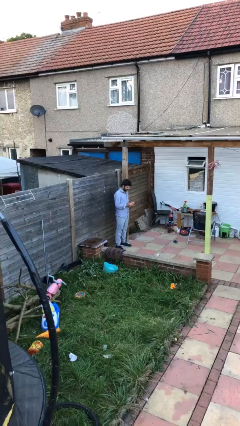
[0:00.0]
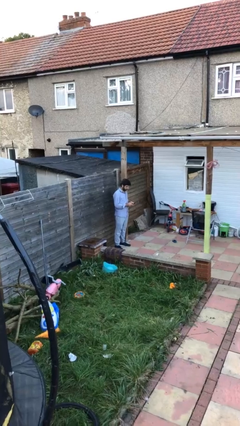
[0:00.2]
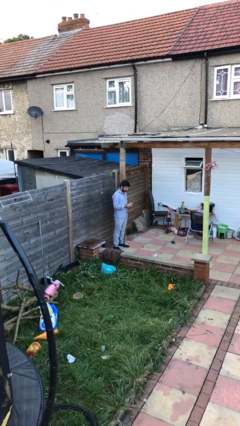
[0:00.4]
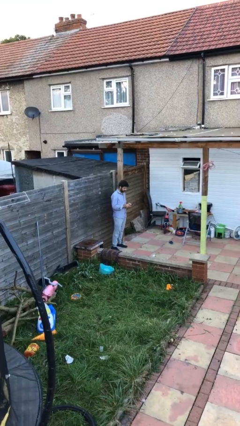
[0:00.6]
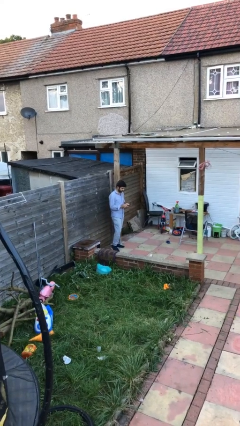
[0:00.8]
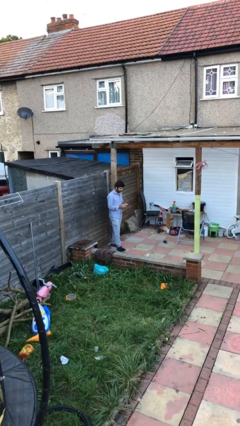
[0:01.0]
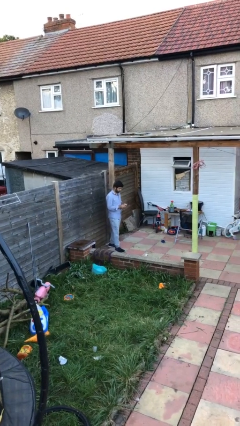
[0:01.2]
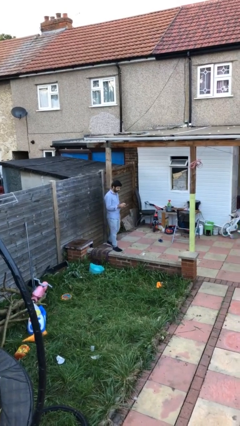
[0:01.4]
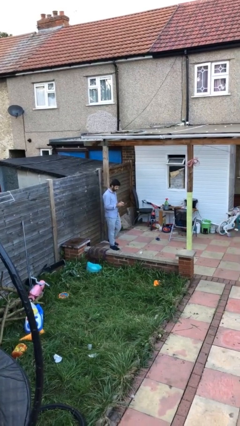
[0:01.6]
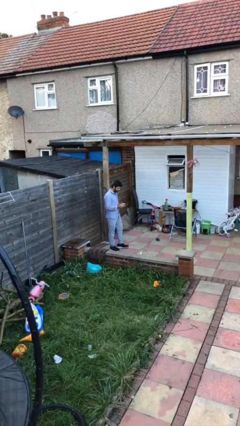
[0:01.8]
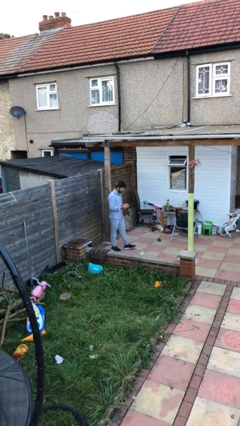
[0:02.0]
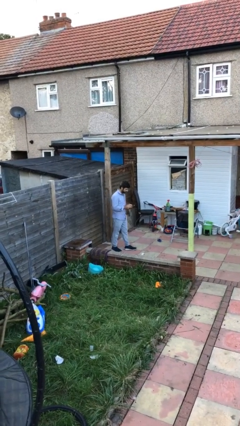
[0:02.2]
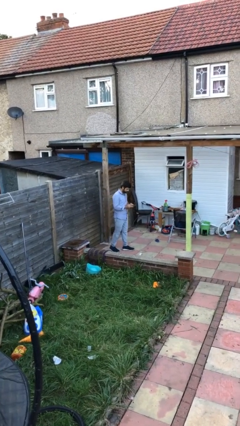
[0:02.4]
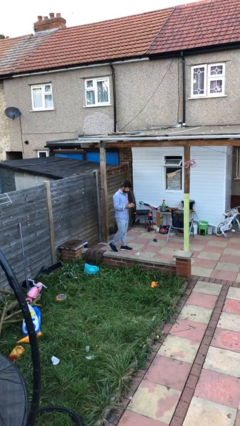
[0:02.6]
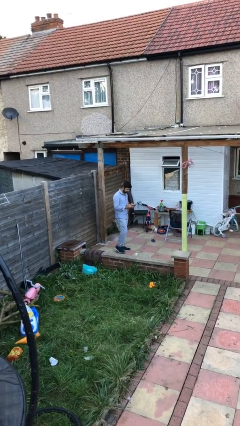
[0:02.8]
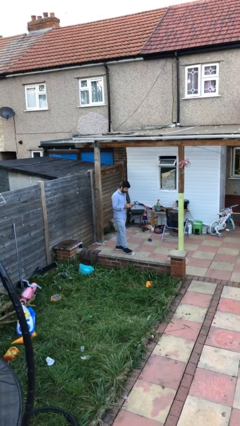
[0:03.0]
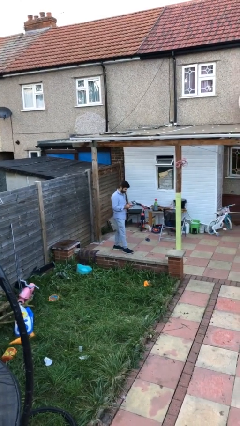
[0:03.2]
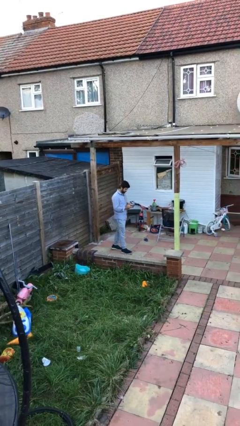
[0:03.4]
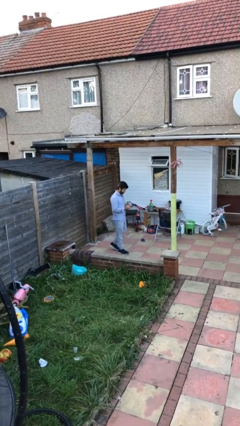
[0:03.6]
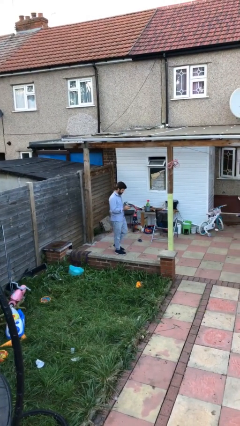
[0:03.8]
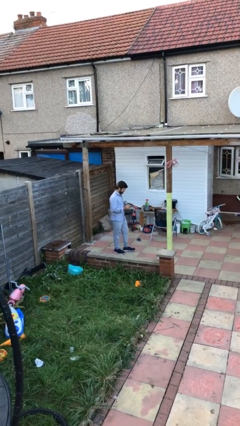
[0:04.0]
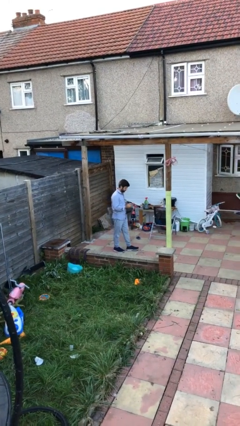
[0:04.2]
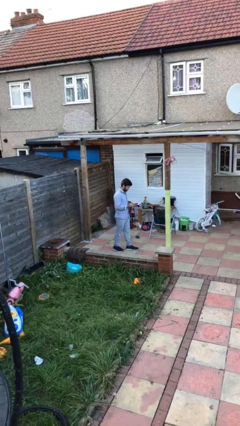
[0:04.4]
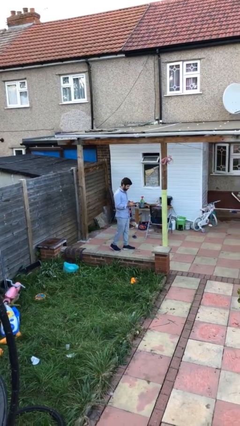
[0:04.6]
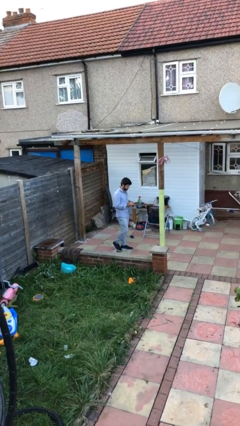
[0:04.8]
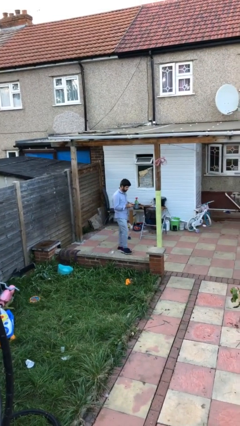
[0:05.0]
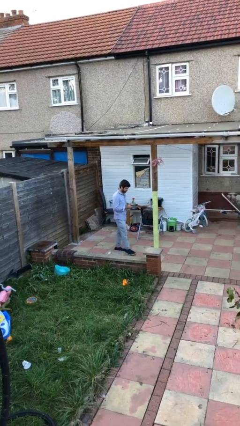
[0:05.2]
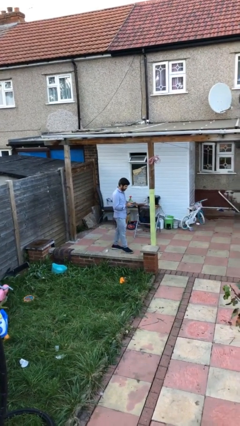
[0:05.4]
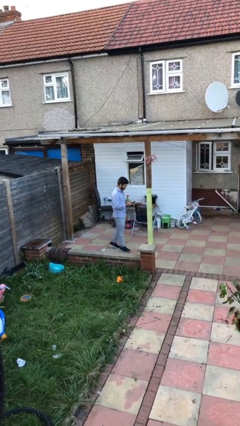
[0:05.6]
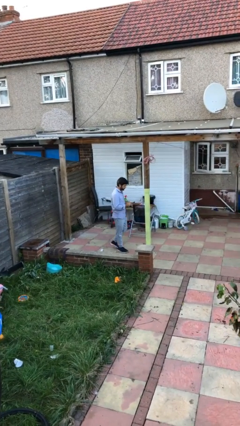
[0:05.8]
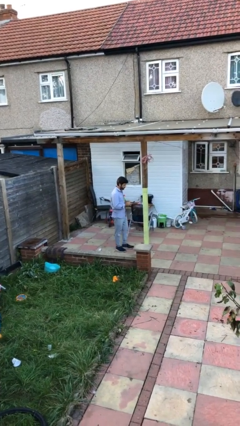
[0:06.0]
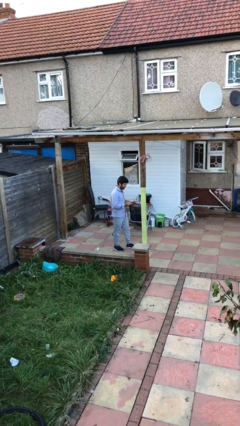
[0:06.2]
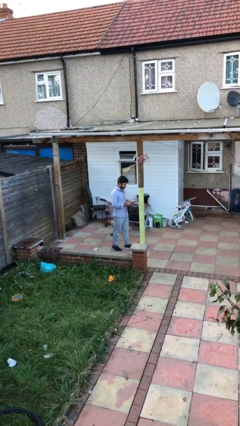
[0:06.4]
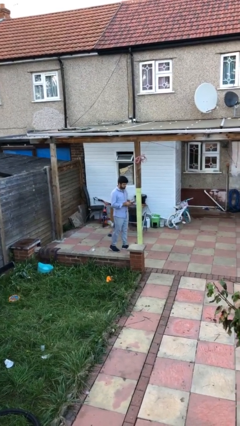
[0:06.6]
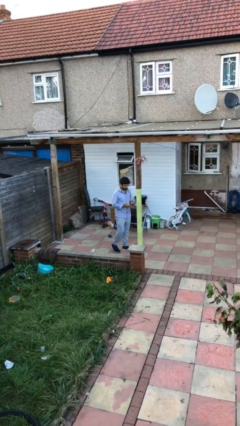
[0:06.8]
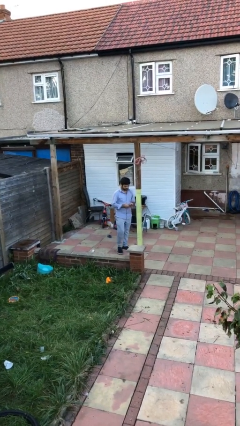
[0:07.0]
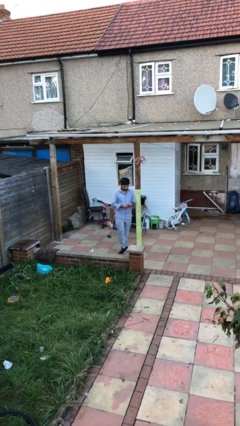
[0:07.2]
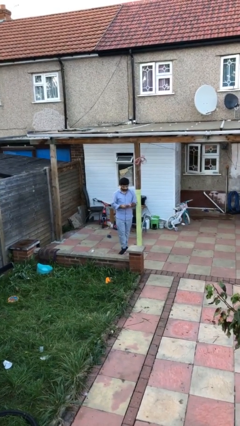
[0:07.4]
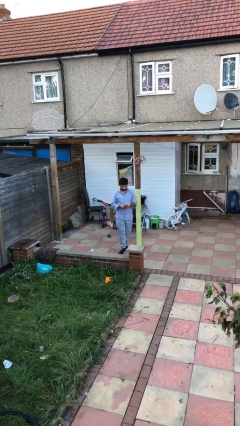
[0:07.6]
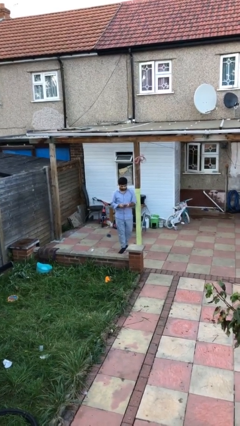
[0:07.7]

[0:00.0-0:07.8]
person texts on phone

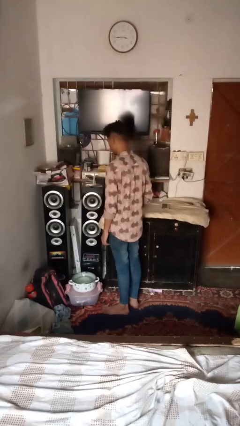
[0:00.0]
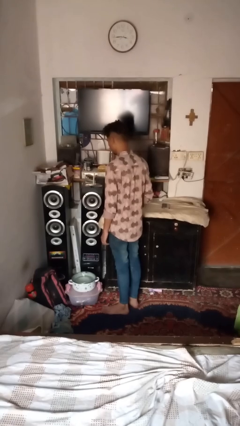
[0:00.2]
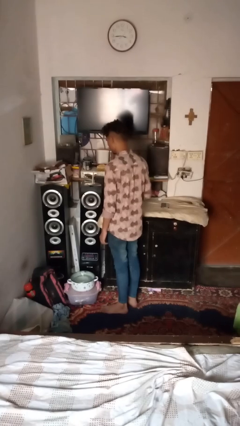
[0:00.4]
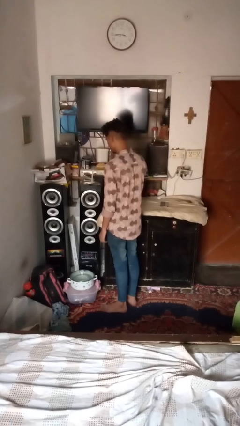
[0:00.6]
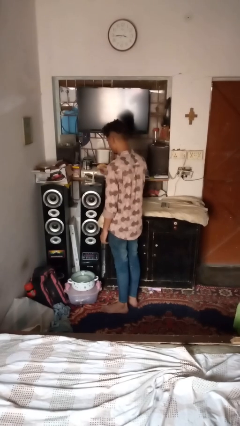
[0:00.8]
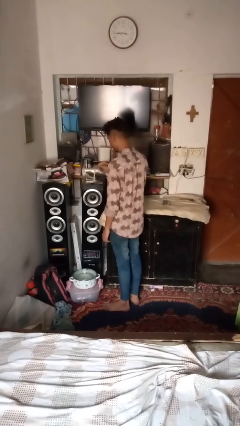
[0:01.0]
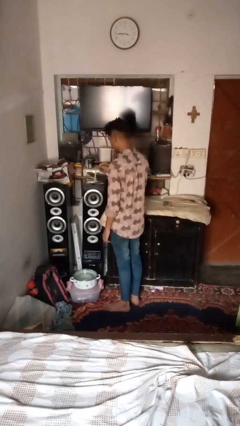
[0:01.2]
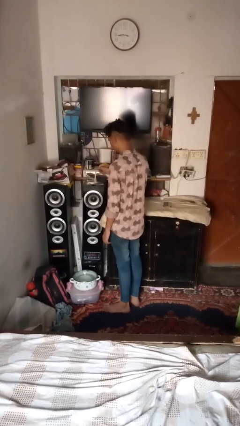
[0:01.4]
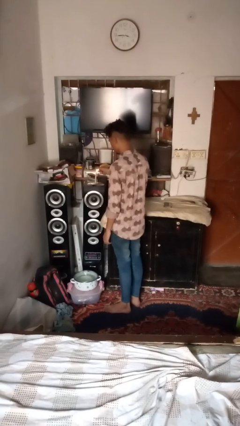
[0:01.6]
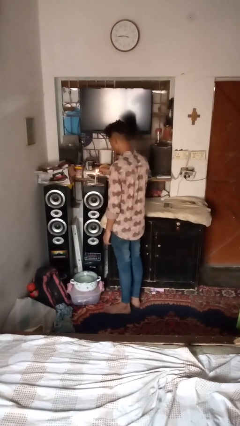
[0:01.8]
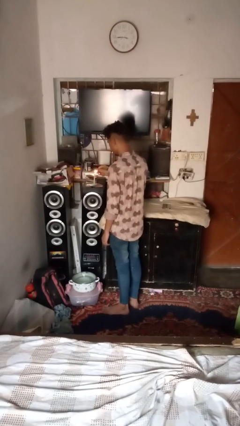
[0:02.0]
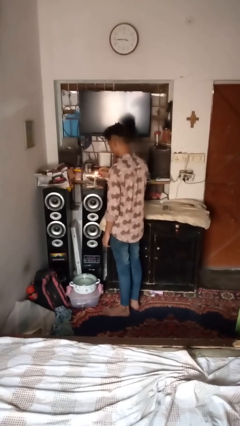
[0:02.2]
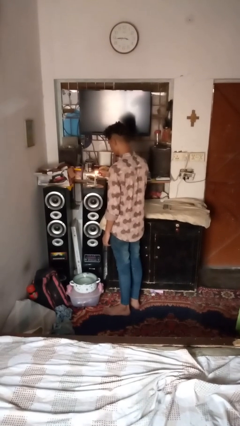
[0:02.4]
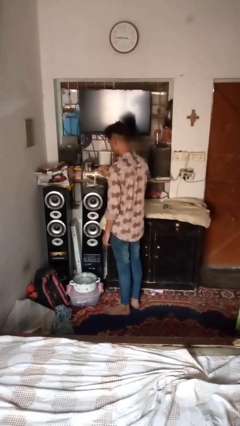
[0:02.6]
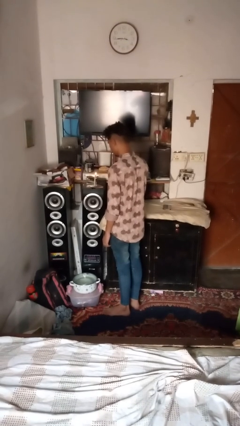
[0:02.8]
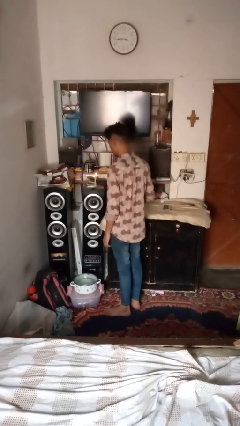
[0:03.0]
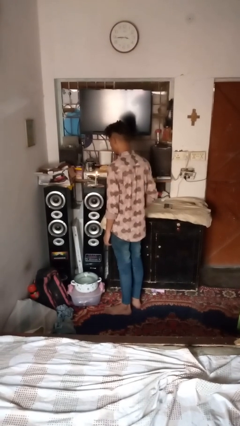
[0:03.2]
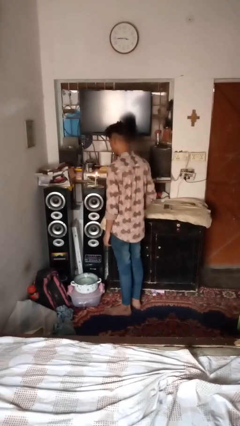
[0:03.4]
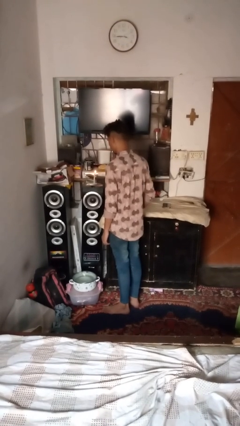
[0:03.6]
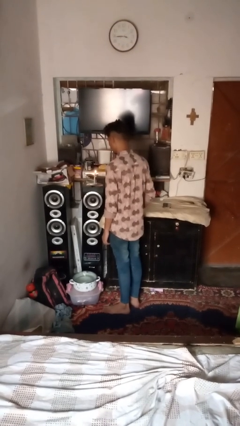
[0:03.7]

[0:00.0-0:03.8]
person lights candle

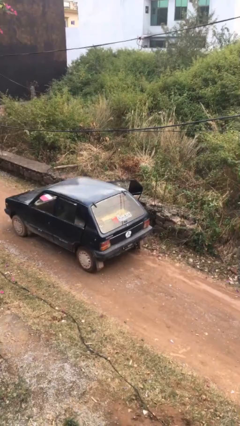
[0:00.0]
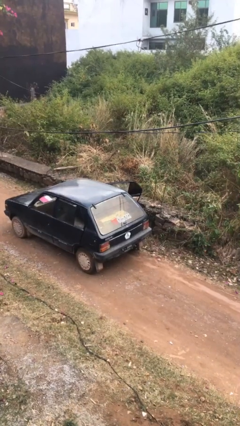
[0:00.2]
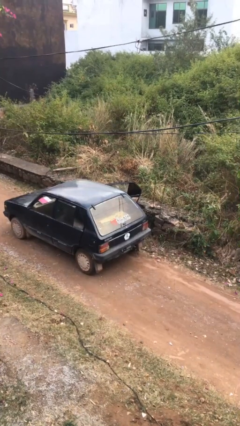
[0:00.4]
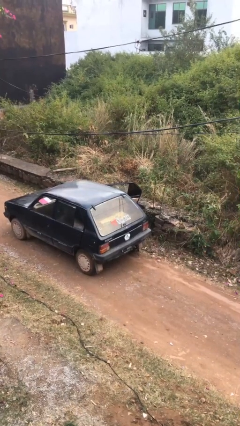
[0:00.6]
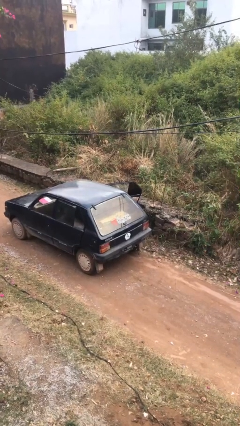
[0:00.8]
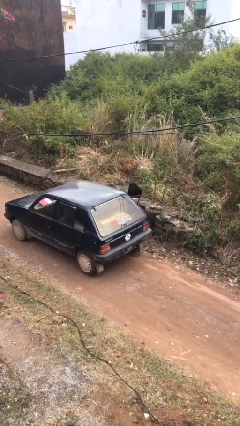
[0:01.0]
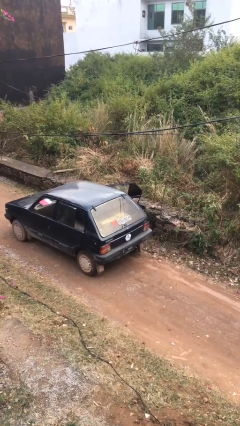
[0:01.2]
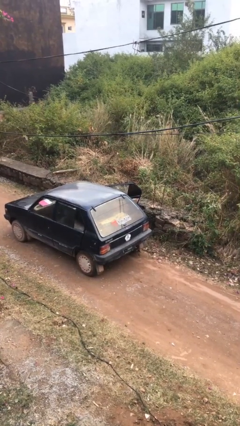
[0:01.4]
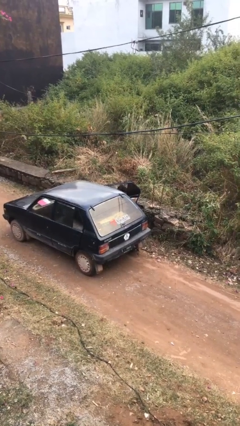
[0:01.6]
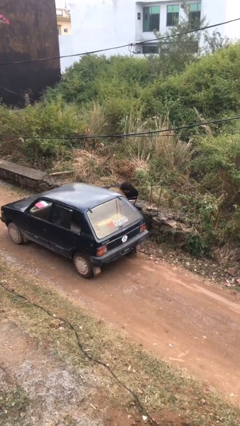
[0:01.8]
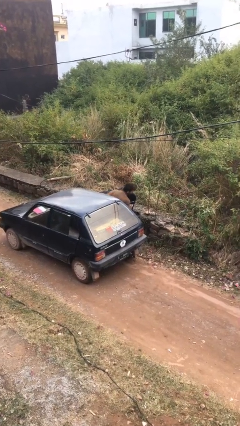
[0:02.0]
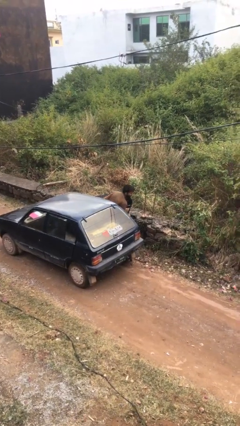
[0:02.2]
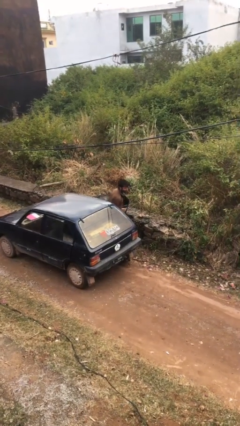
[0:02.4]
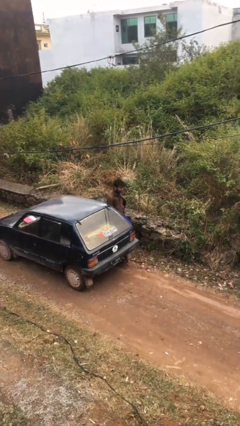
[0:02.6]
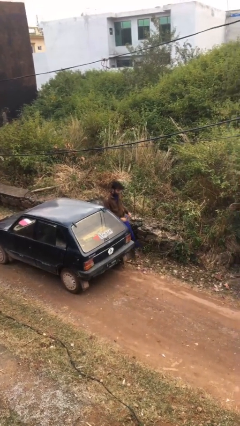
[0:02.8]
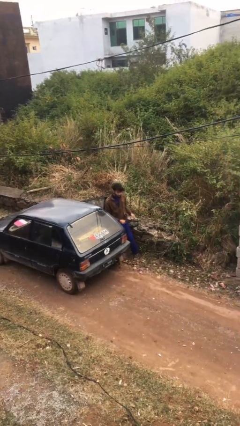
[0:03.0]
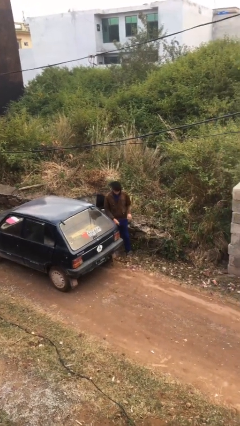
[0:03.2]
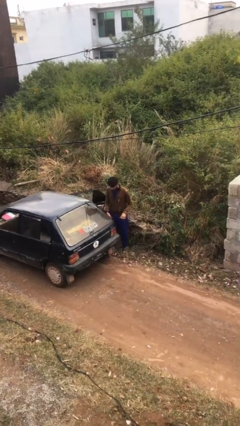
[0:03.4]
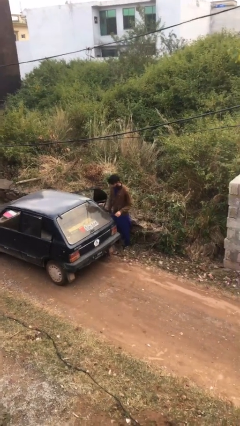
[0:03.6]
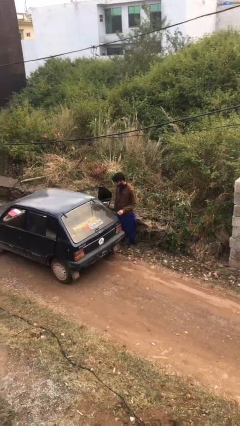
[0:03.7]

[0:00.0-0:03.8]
person exits car

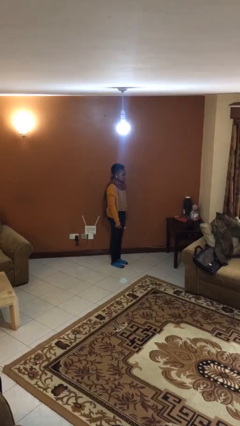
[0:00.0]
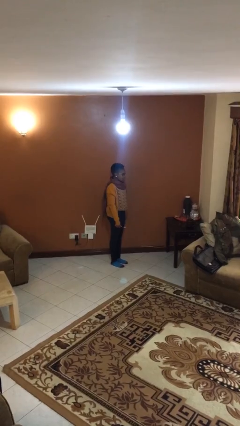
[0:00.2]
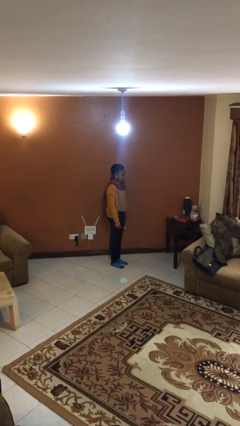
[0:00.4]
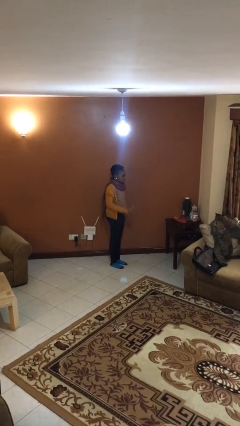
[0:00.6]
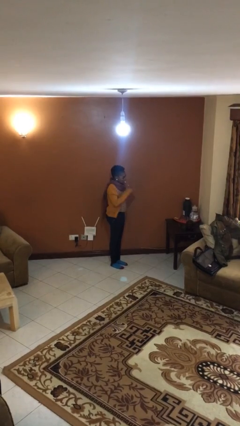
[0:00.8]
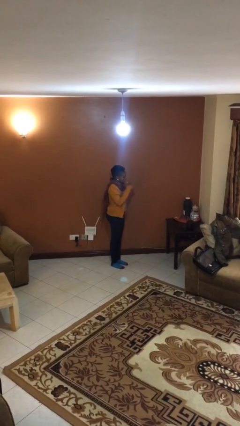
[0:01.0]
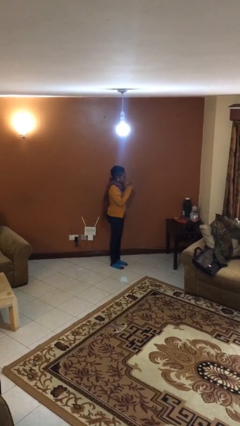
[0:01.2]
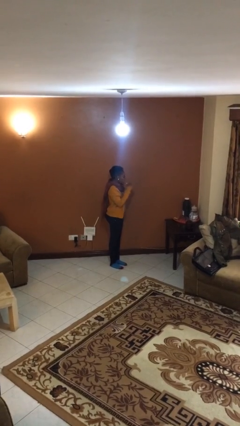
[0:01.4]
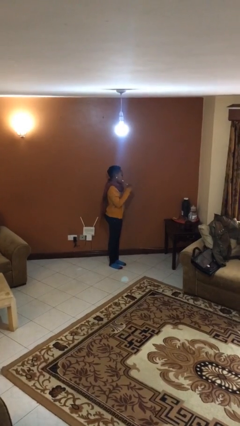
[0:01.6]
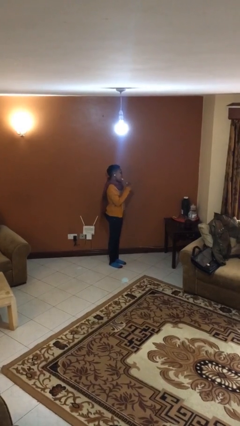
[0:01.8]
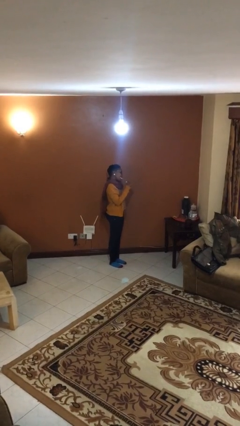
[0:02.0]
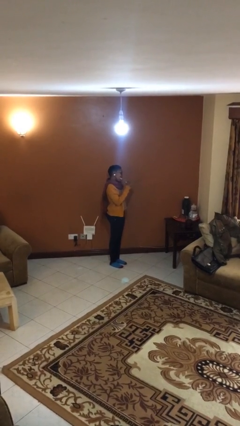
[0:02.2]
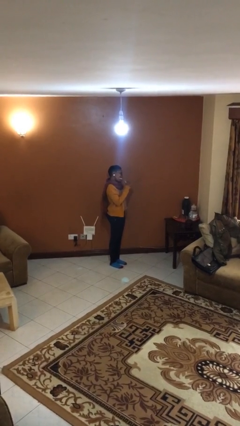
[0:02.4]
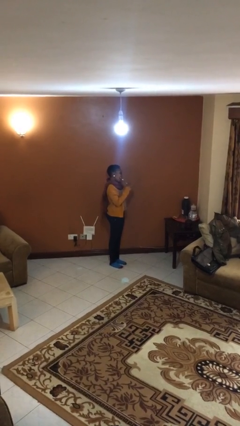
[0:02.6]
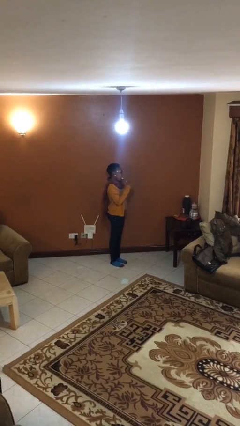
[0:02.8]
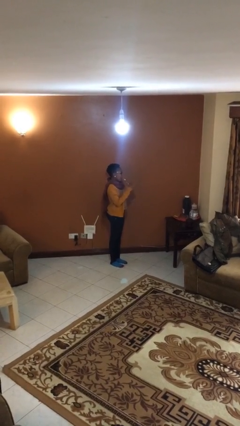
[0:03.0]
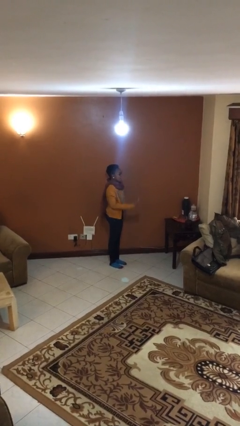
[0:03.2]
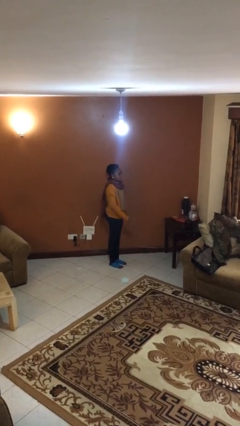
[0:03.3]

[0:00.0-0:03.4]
person brushes teeth
